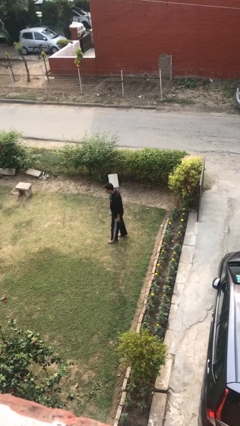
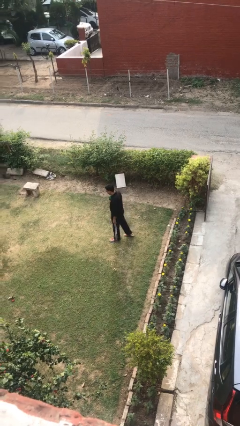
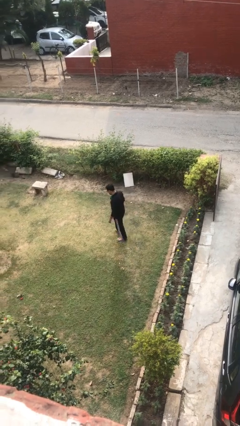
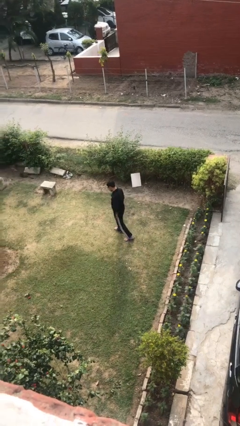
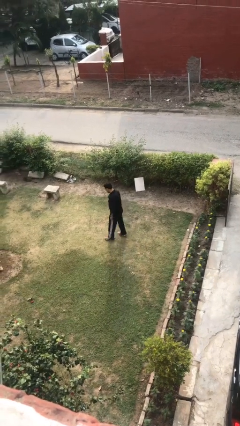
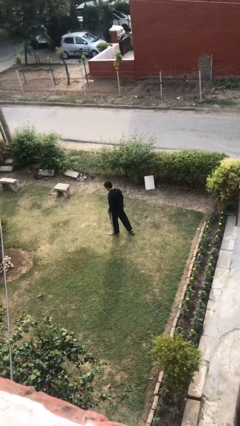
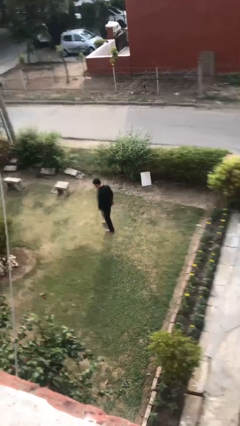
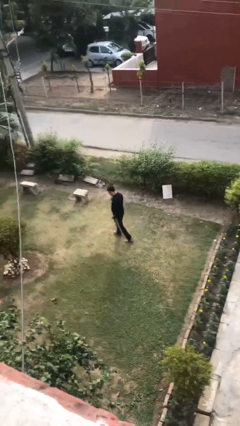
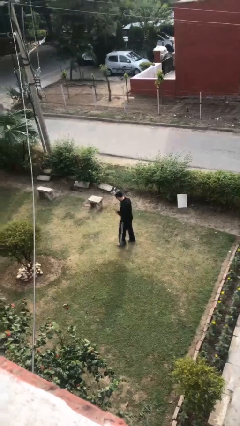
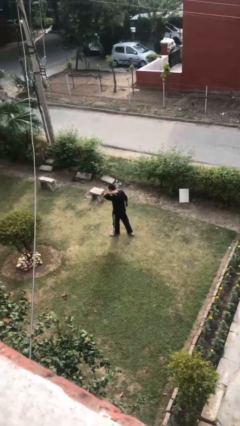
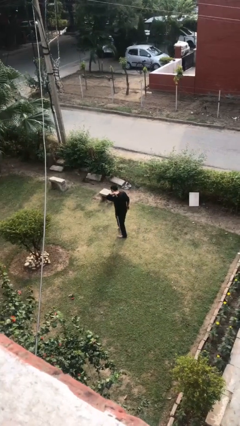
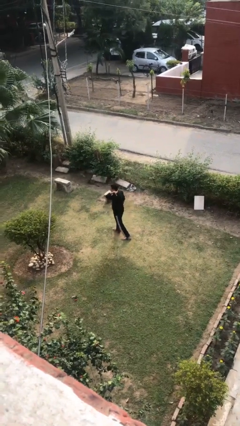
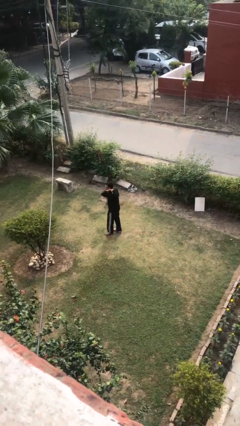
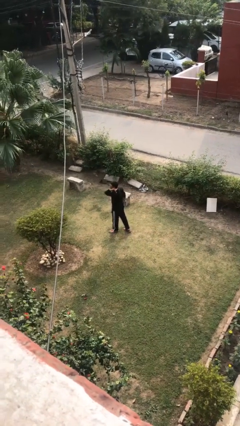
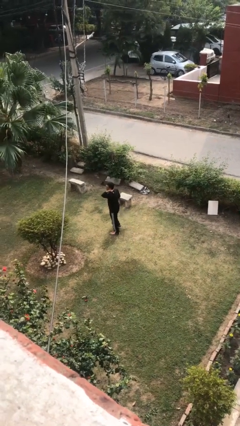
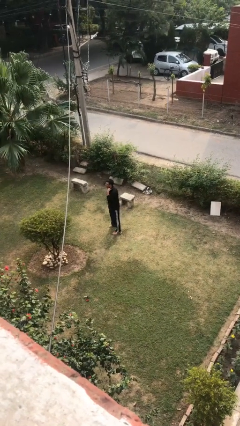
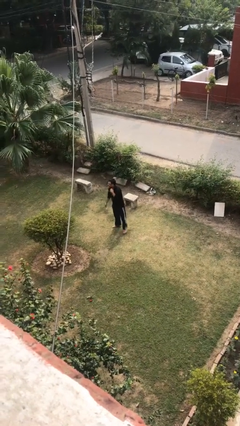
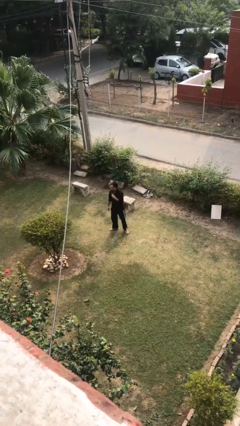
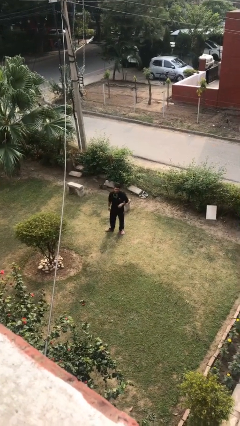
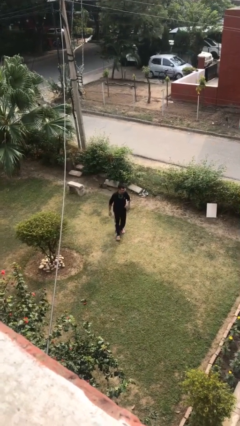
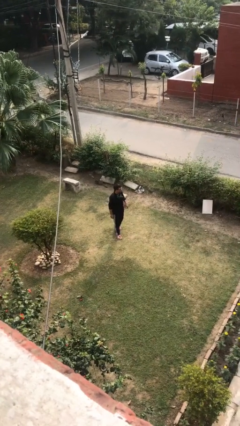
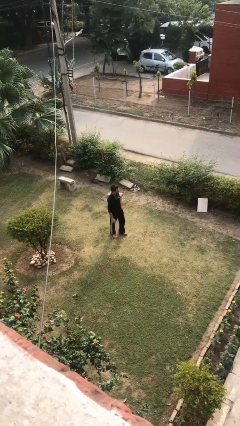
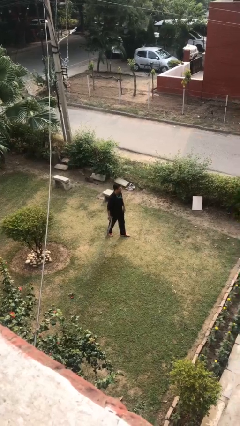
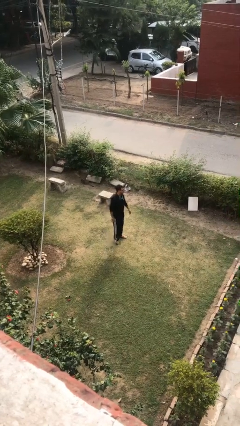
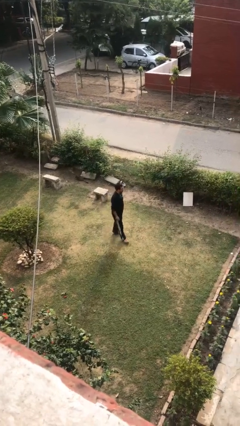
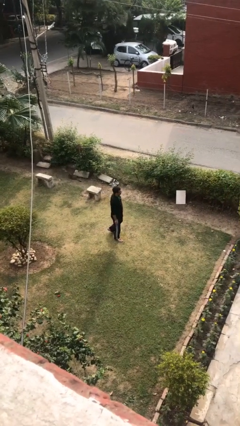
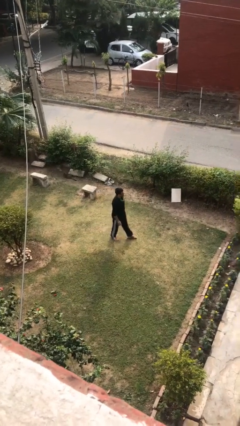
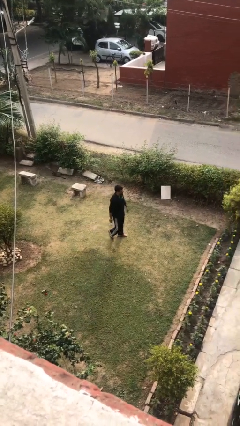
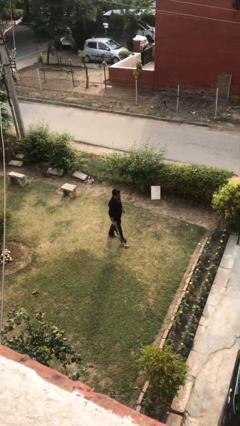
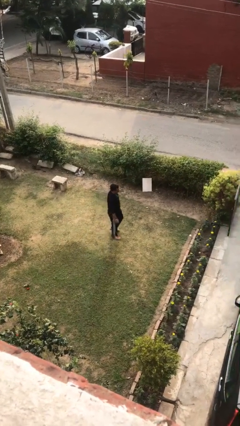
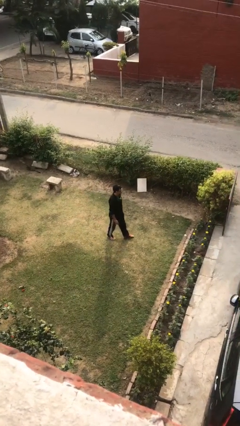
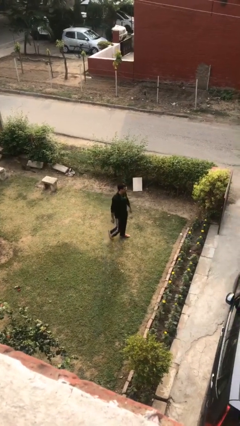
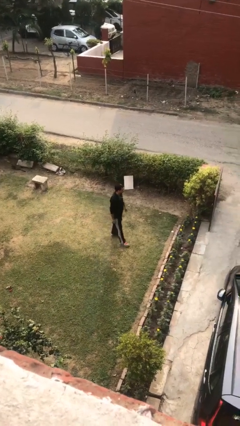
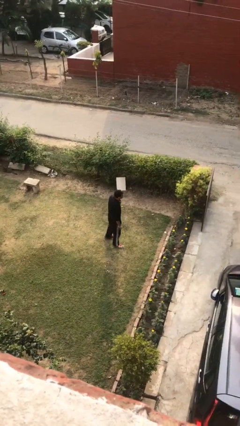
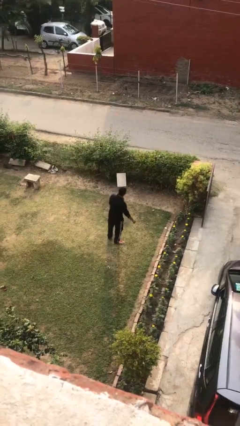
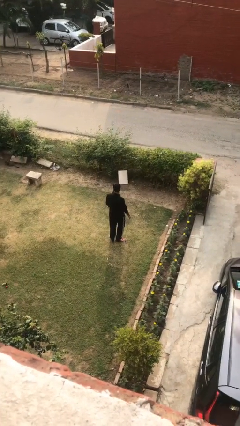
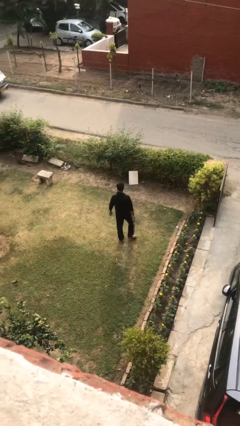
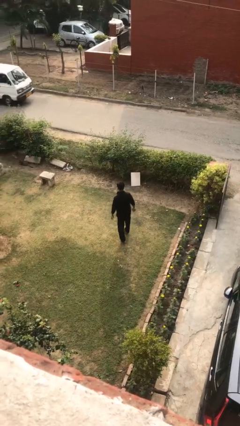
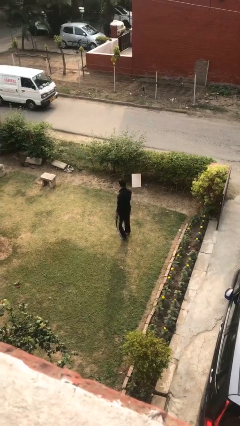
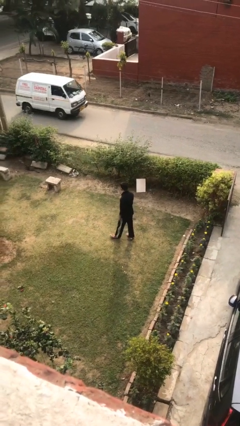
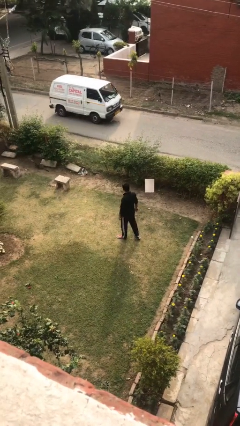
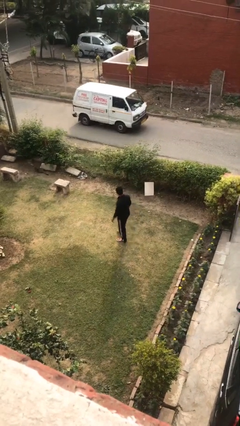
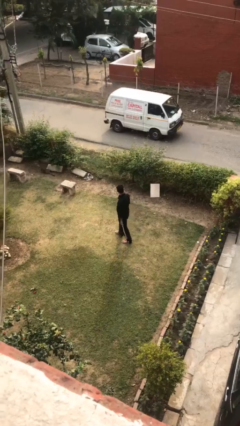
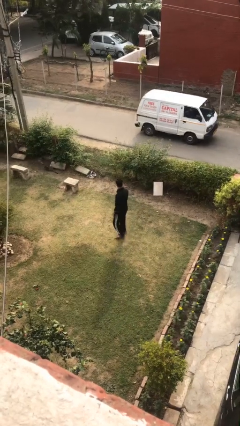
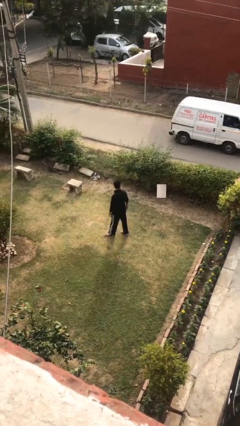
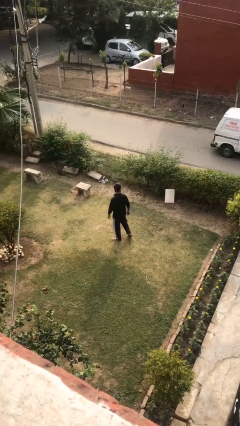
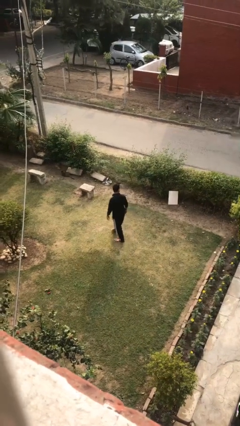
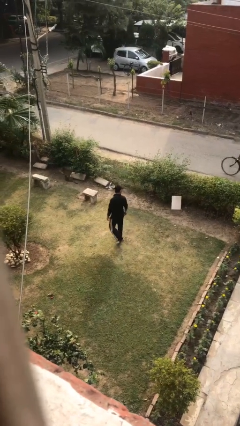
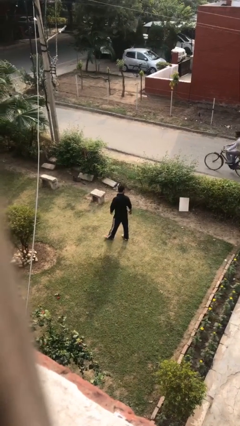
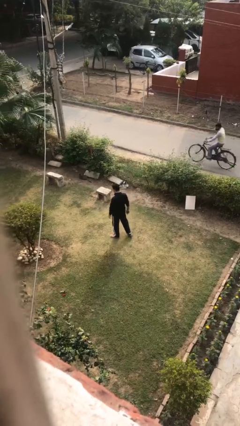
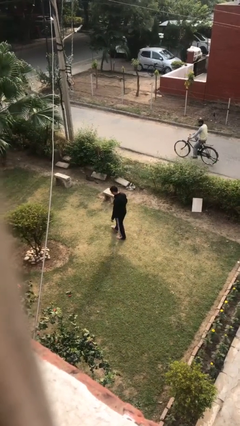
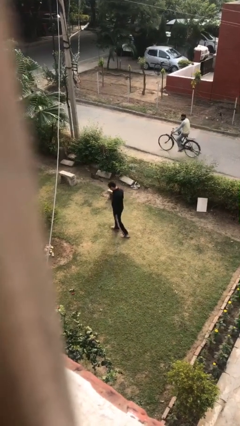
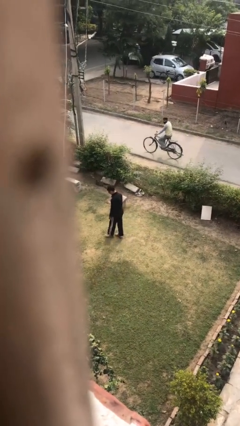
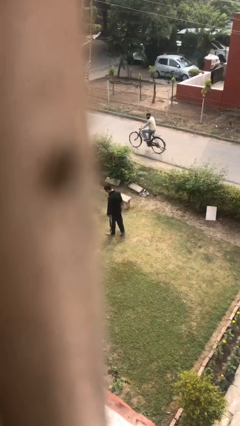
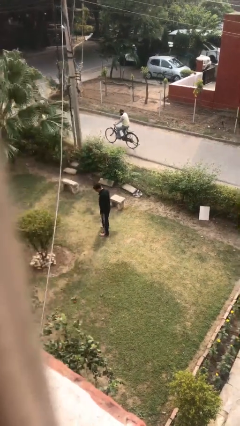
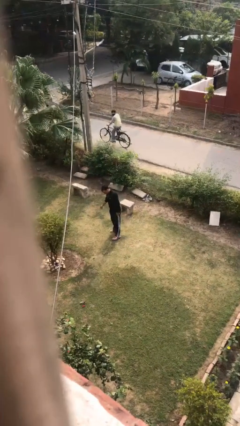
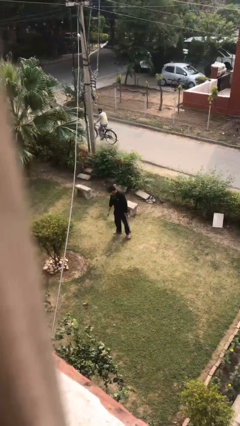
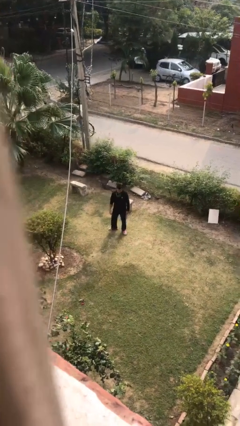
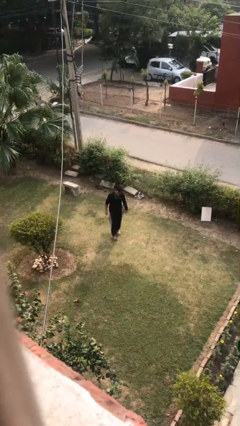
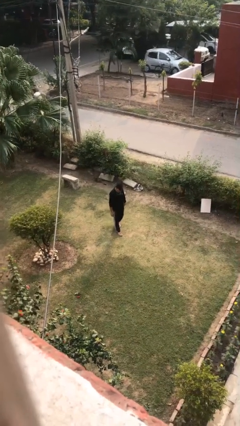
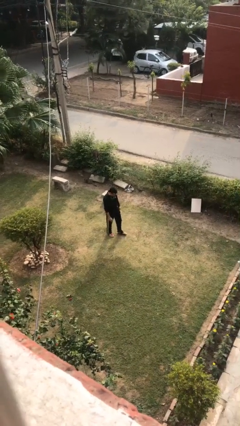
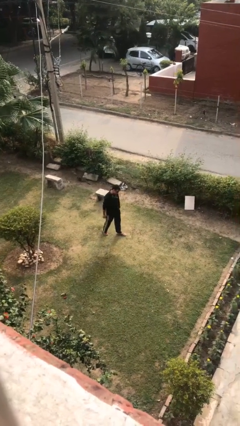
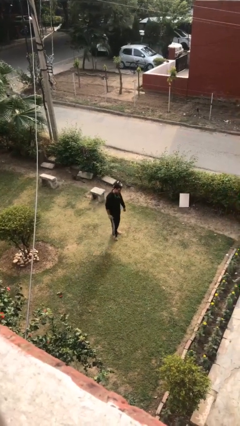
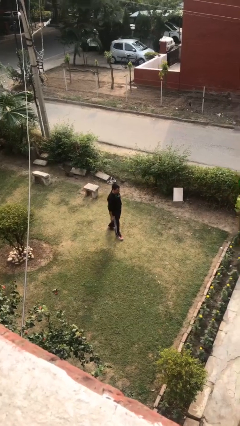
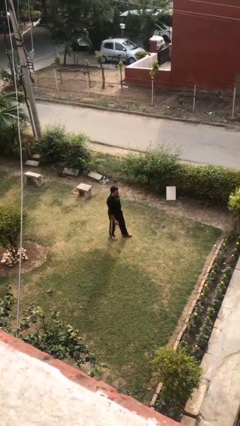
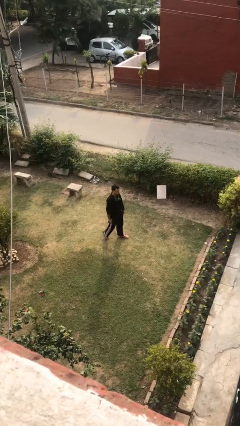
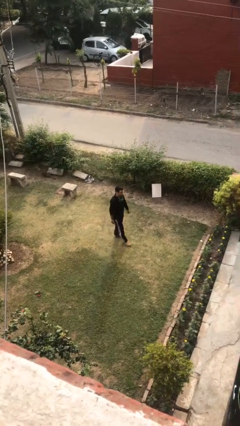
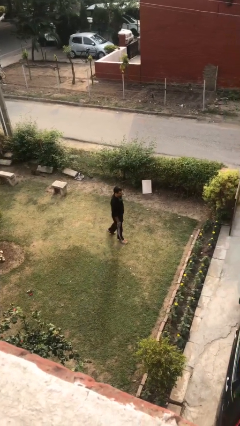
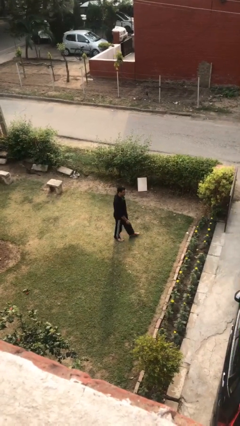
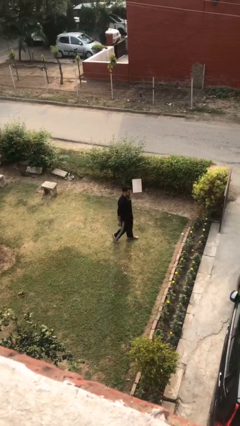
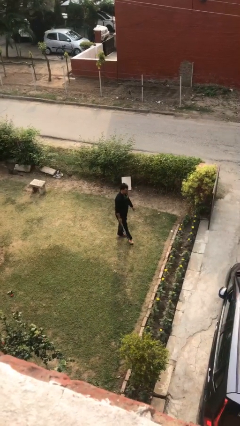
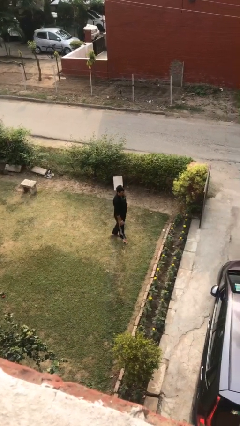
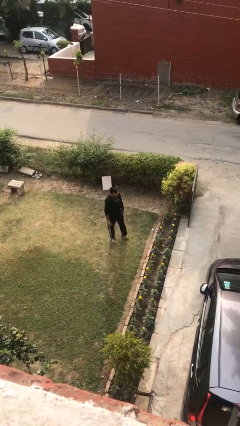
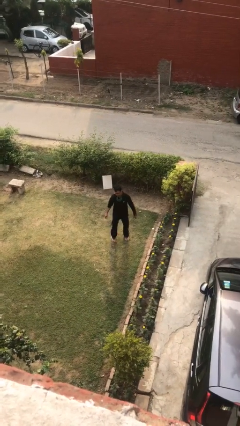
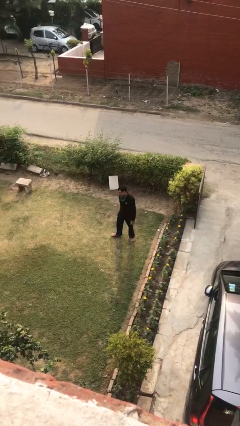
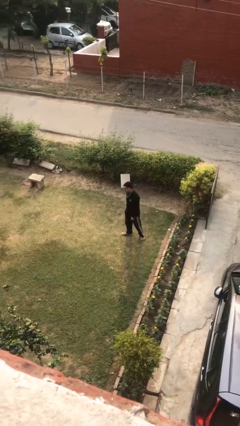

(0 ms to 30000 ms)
person walks

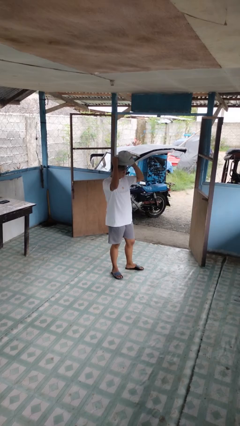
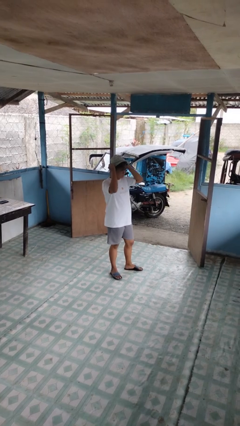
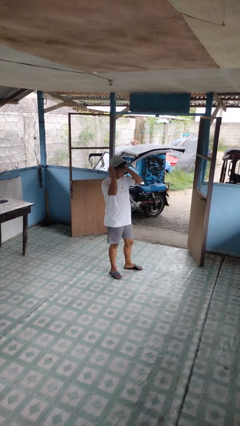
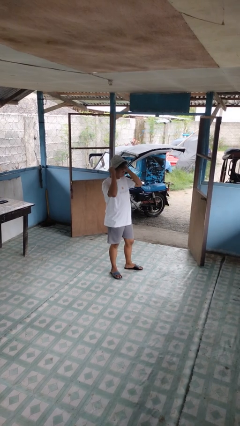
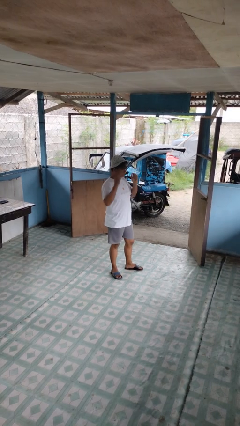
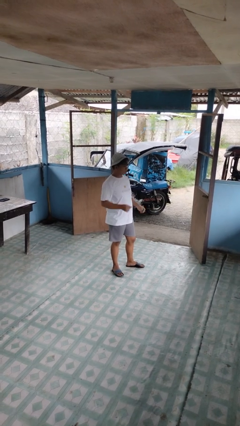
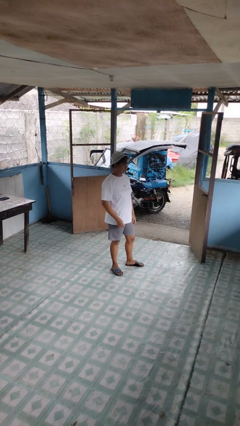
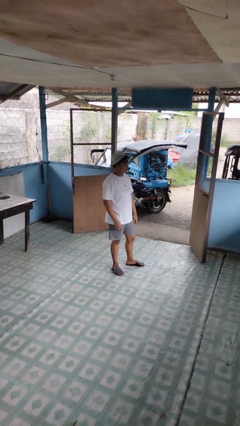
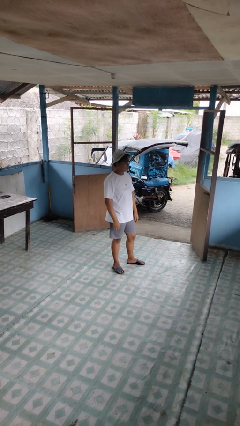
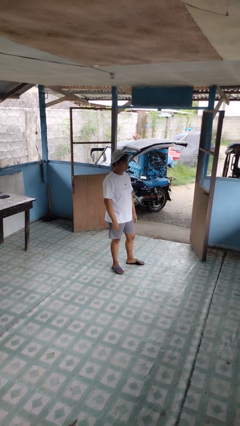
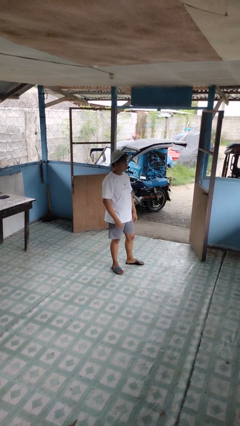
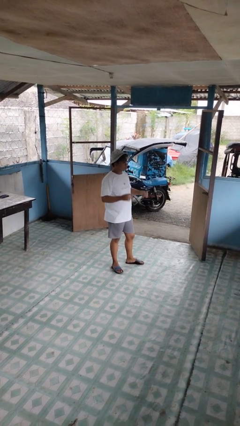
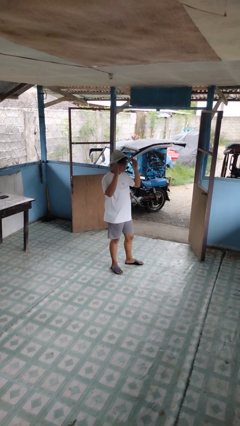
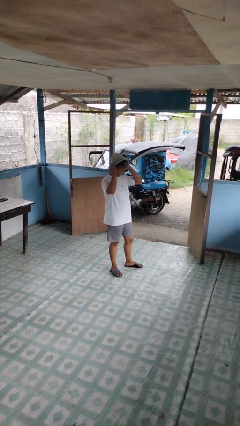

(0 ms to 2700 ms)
person puts on hat

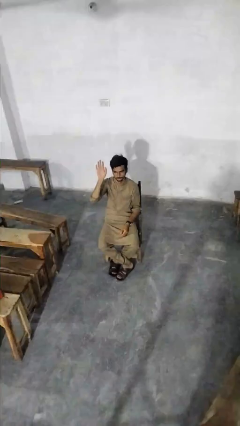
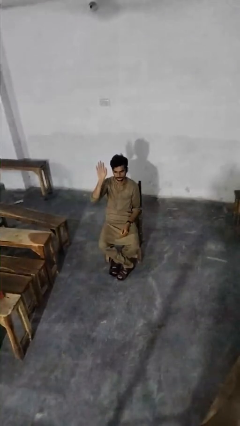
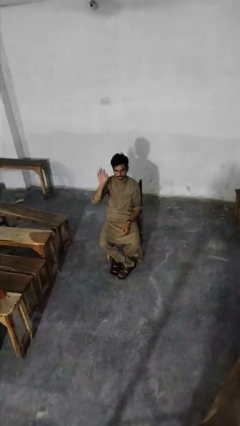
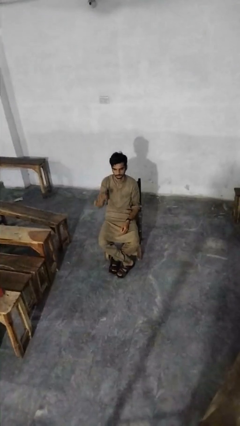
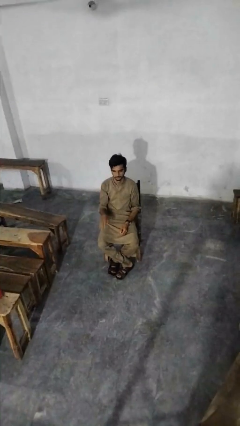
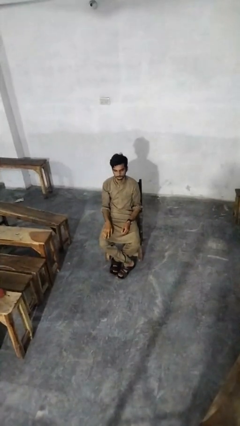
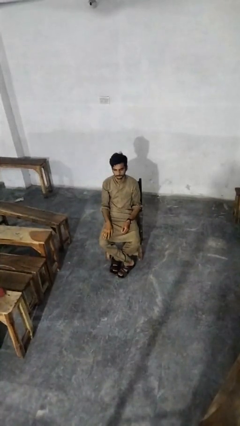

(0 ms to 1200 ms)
person gestures lower hand
